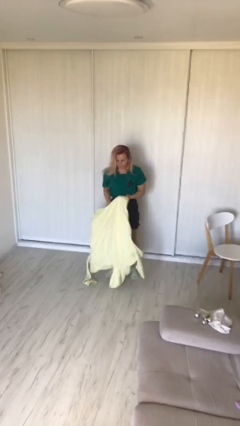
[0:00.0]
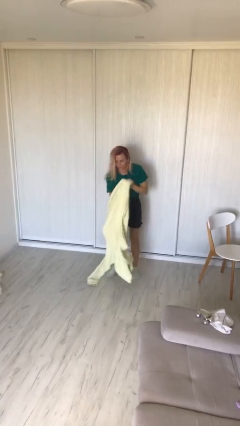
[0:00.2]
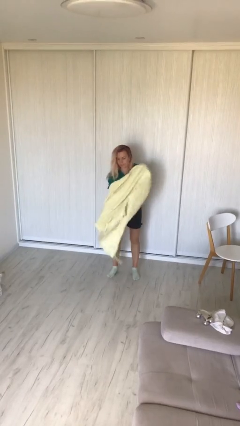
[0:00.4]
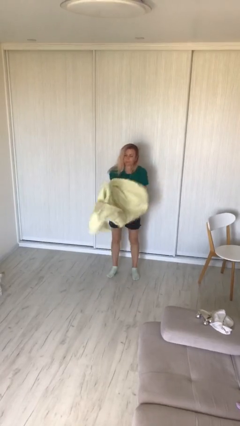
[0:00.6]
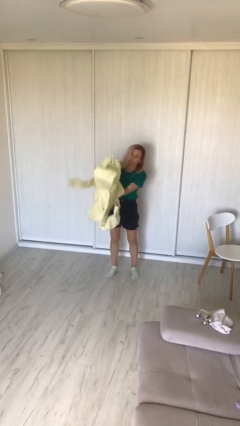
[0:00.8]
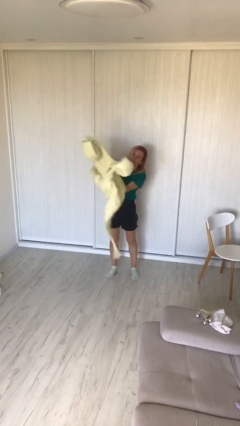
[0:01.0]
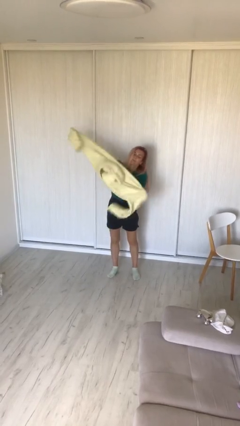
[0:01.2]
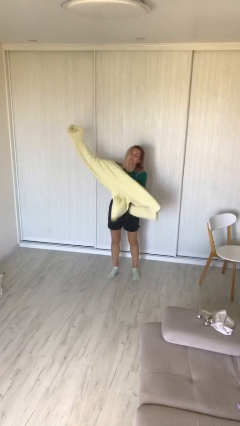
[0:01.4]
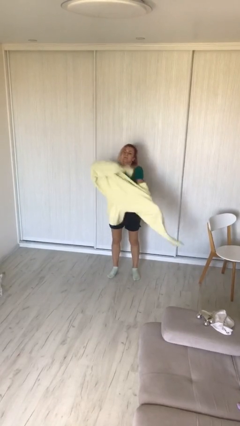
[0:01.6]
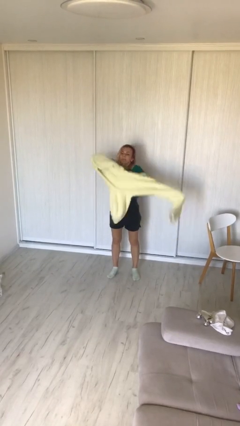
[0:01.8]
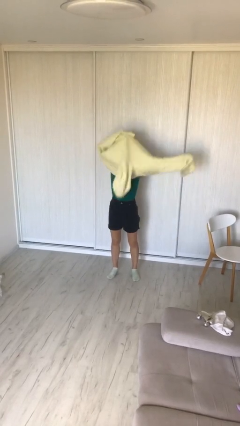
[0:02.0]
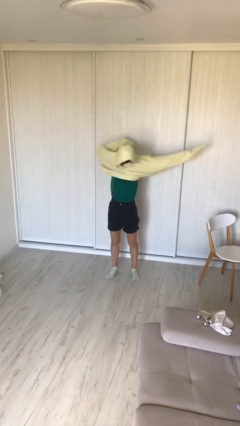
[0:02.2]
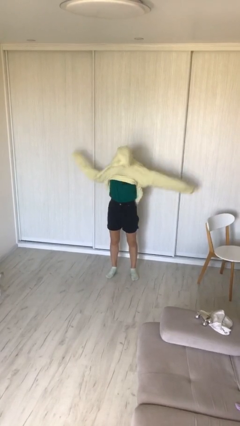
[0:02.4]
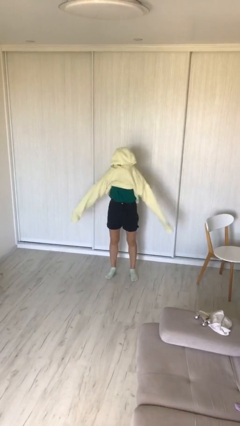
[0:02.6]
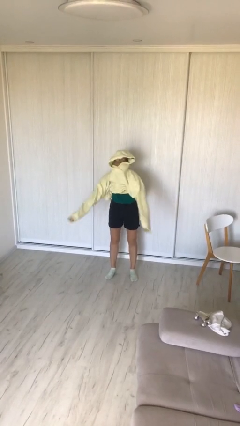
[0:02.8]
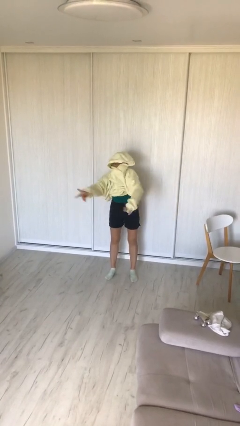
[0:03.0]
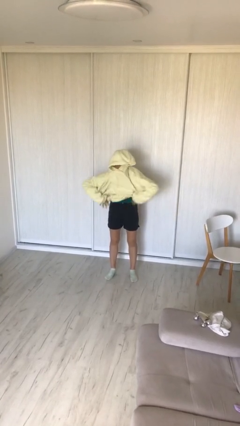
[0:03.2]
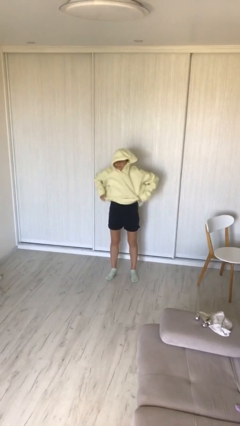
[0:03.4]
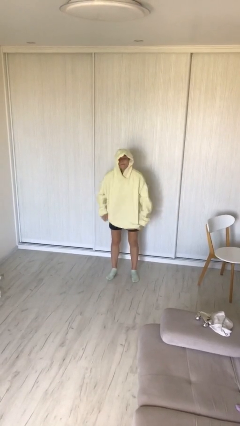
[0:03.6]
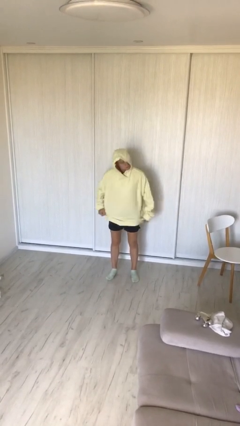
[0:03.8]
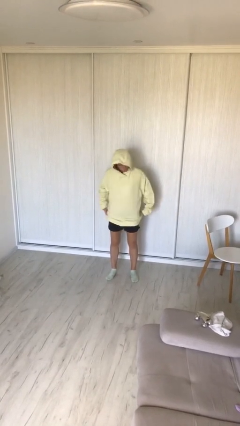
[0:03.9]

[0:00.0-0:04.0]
person puts on hoodie

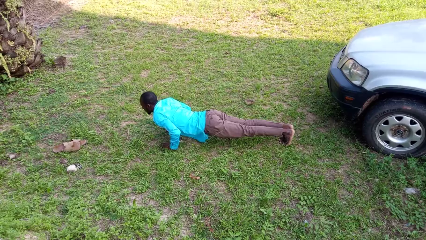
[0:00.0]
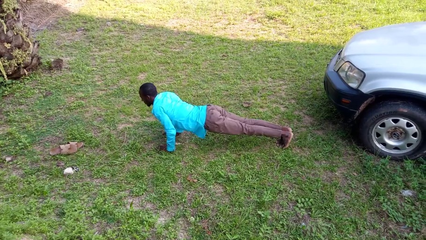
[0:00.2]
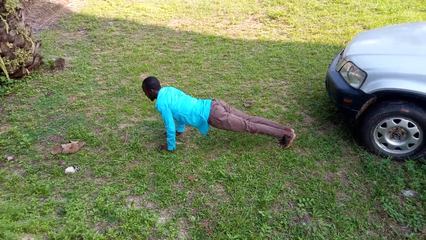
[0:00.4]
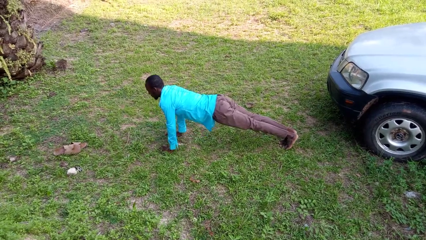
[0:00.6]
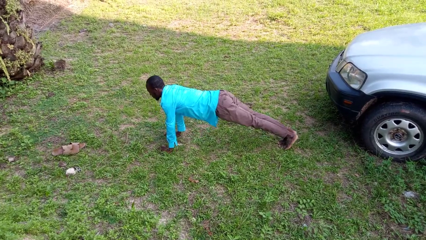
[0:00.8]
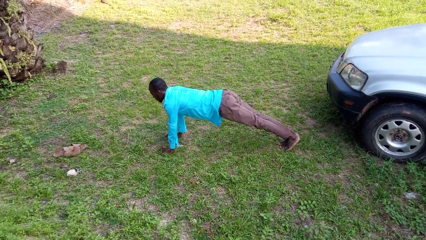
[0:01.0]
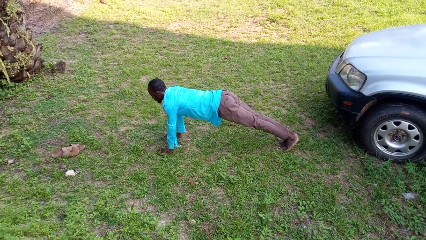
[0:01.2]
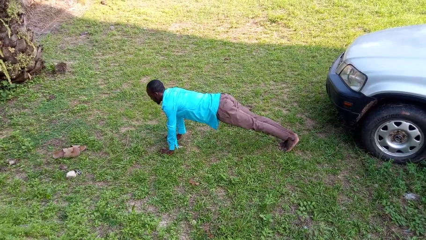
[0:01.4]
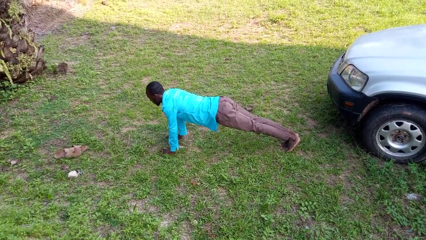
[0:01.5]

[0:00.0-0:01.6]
person exercises with pushup

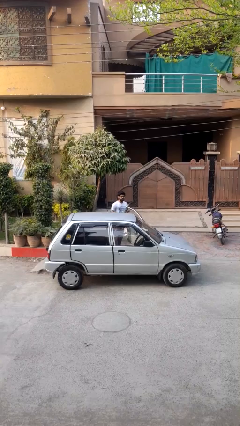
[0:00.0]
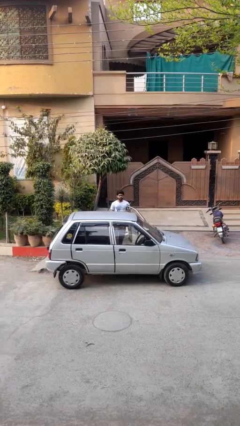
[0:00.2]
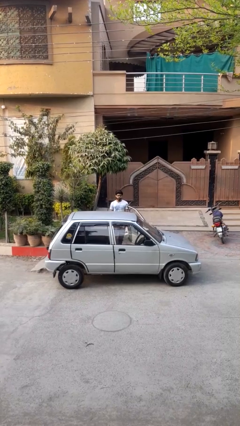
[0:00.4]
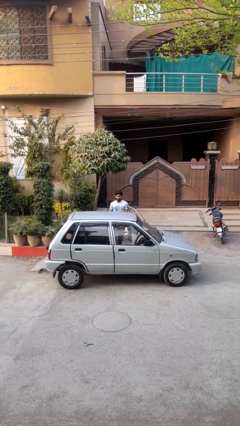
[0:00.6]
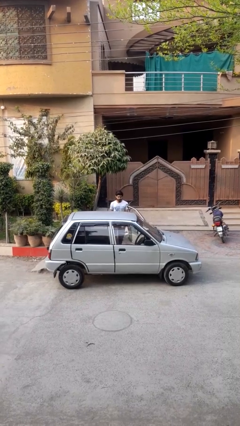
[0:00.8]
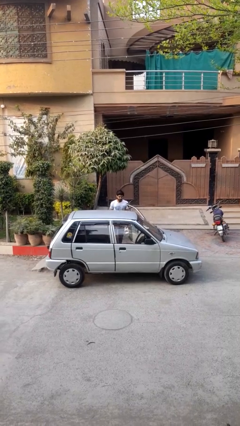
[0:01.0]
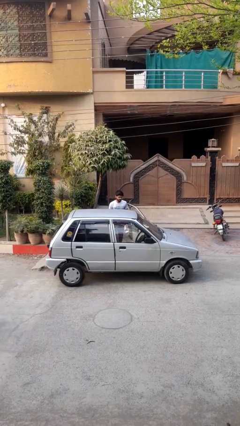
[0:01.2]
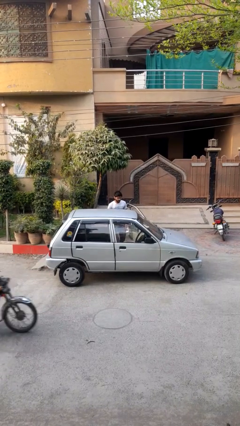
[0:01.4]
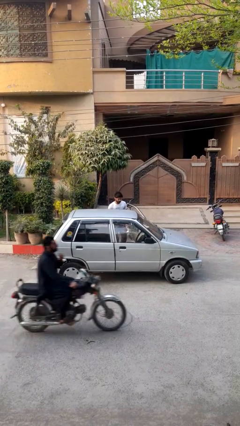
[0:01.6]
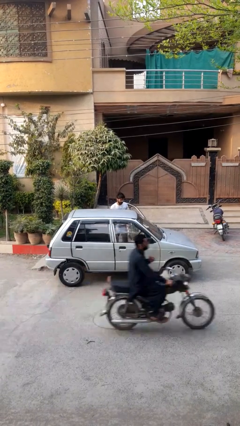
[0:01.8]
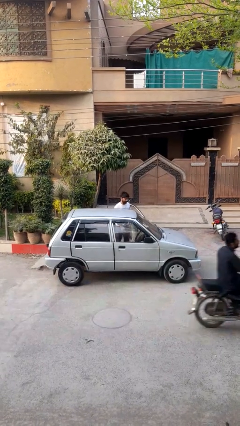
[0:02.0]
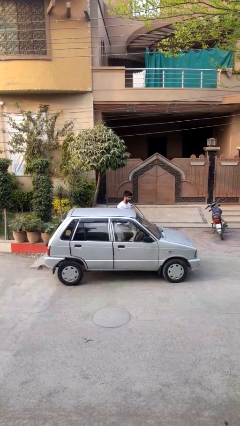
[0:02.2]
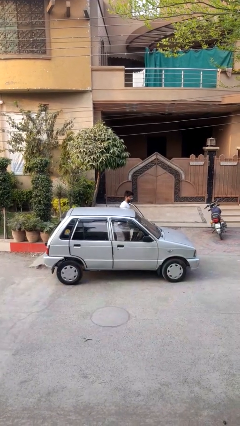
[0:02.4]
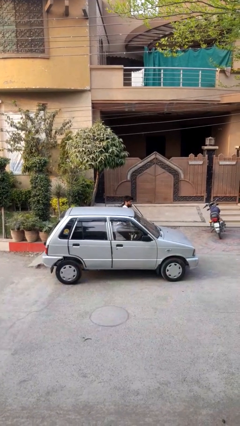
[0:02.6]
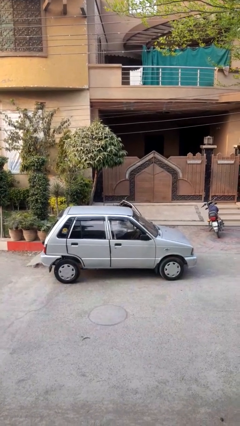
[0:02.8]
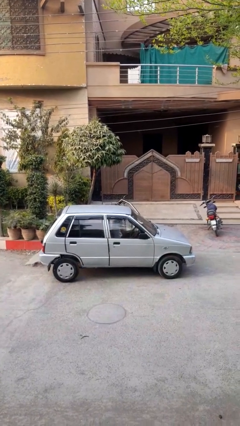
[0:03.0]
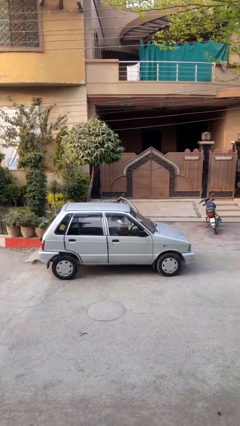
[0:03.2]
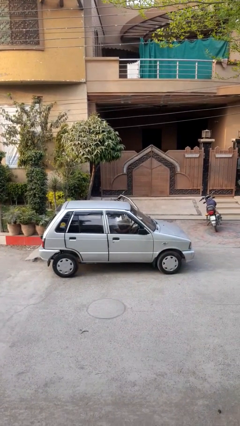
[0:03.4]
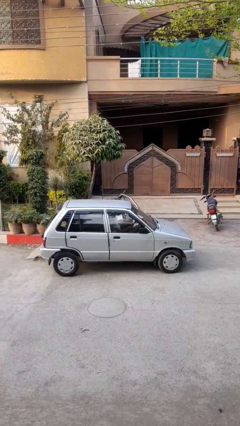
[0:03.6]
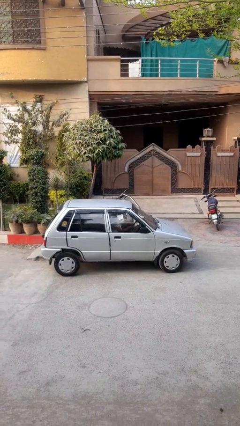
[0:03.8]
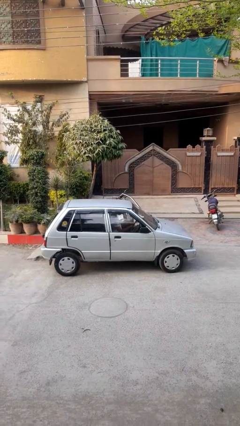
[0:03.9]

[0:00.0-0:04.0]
person enters car

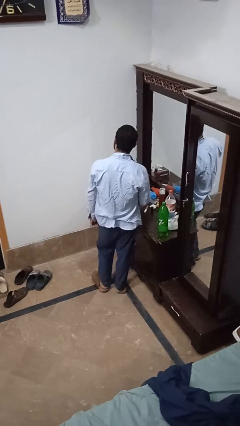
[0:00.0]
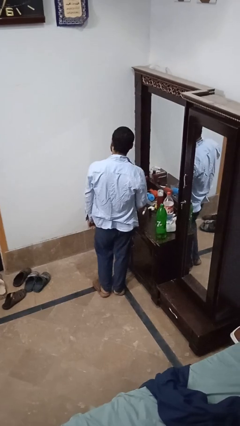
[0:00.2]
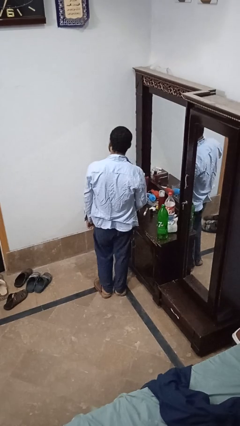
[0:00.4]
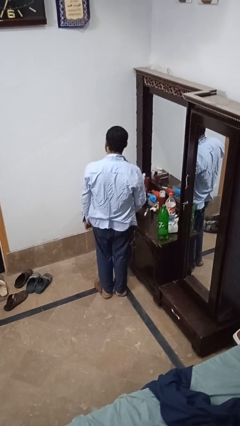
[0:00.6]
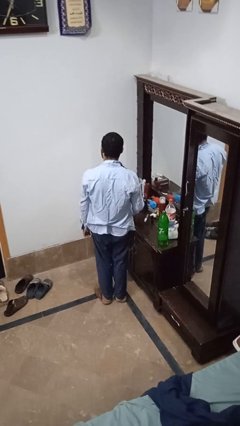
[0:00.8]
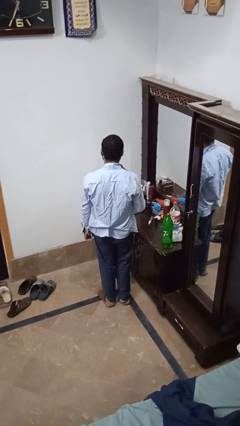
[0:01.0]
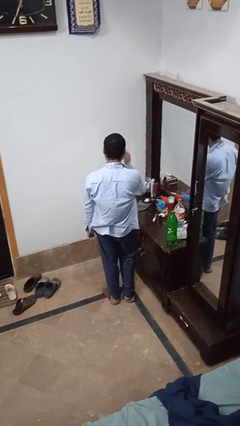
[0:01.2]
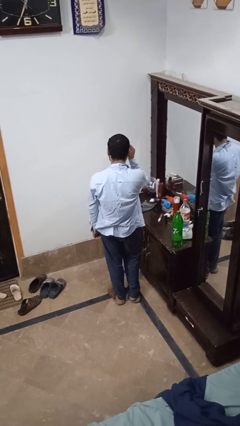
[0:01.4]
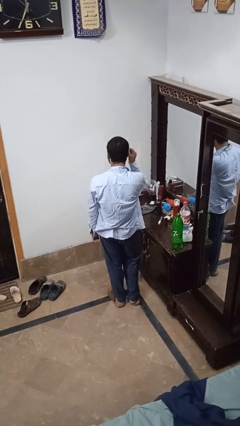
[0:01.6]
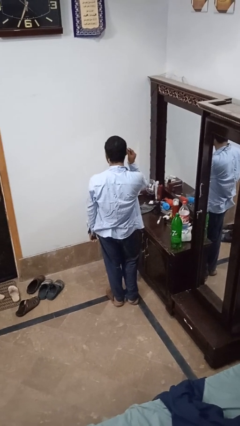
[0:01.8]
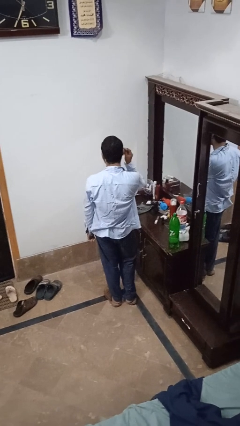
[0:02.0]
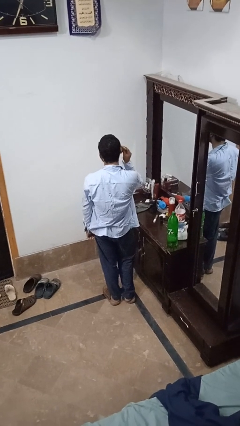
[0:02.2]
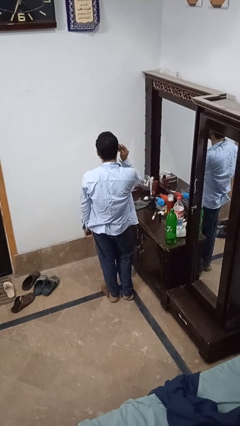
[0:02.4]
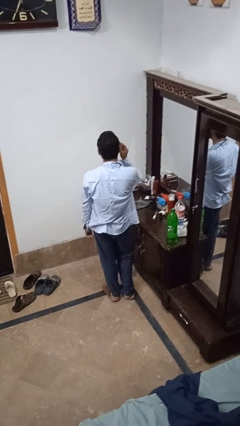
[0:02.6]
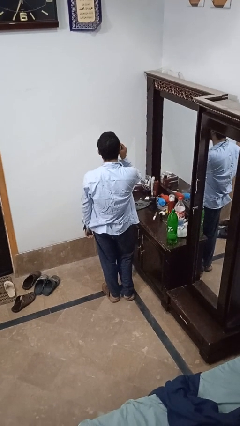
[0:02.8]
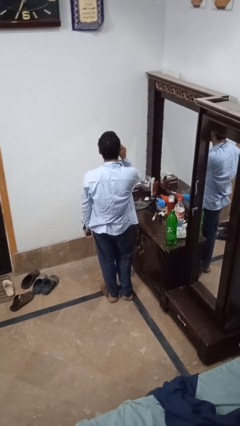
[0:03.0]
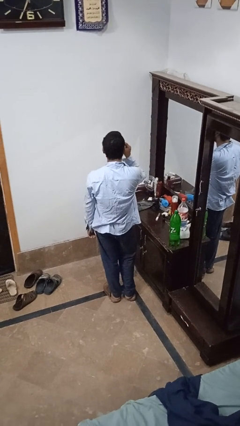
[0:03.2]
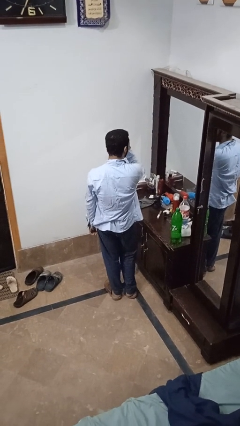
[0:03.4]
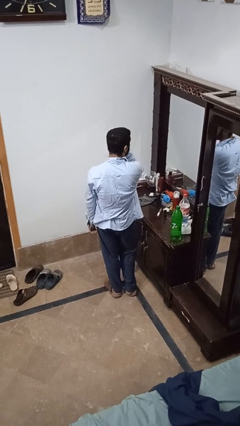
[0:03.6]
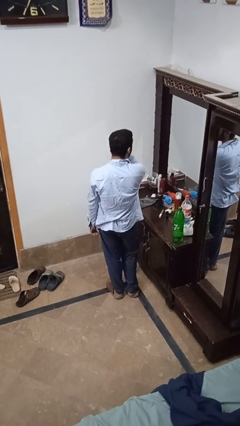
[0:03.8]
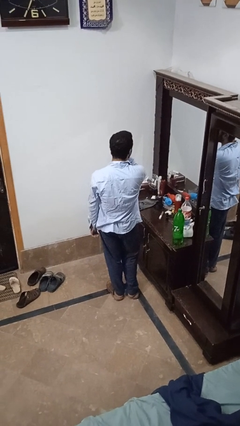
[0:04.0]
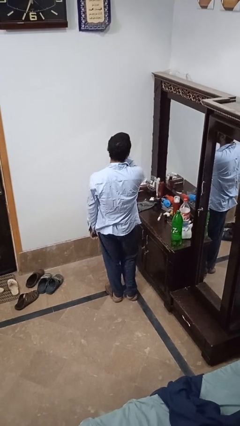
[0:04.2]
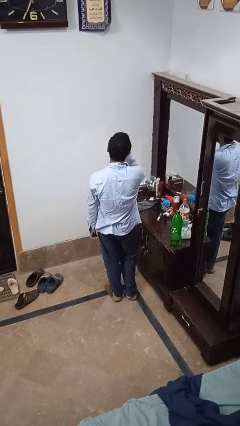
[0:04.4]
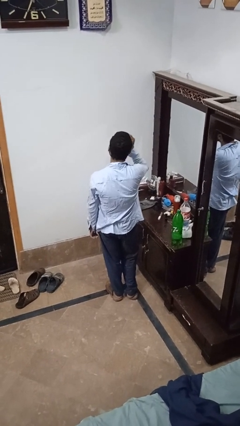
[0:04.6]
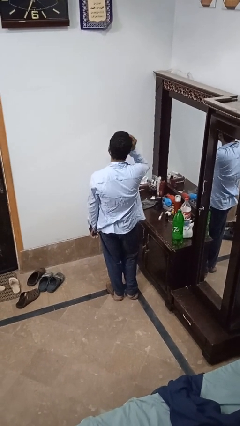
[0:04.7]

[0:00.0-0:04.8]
person applies foundation makeup

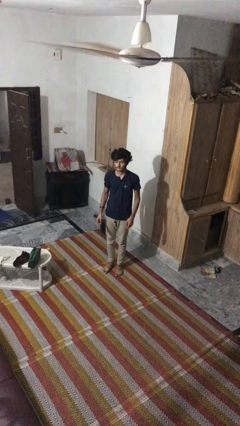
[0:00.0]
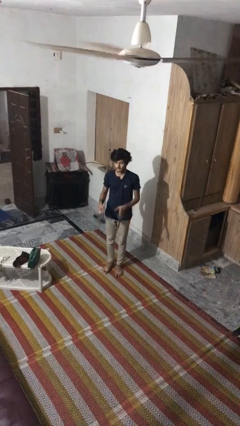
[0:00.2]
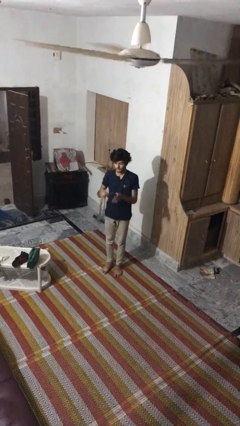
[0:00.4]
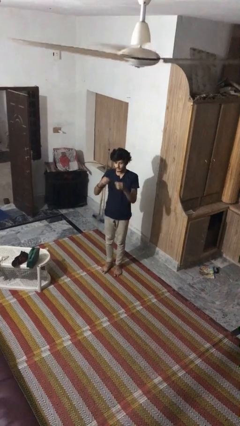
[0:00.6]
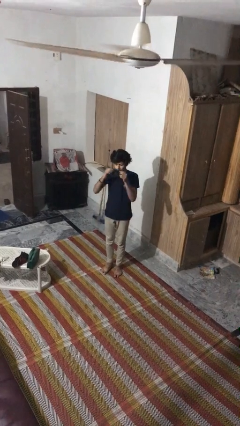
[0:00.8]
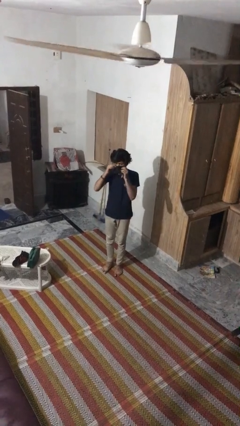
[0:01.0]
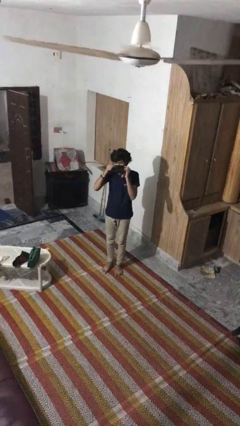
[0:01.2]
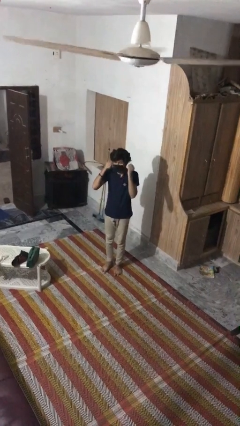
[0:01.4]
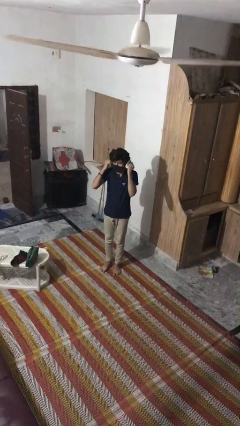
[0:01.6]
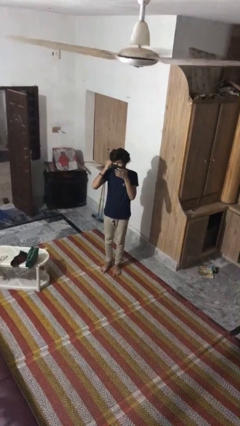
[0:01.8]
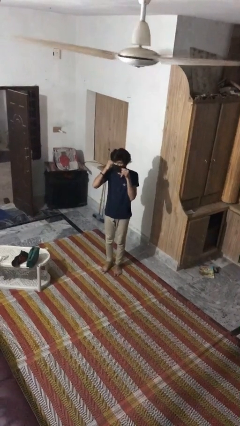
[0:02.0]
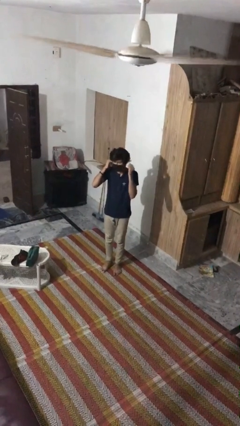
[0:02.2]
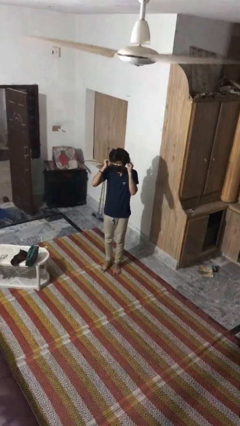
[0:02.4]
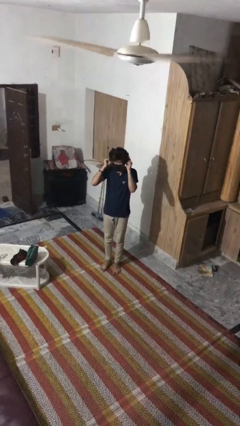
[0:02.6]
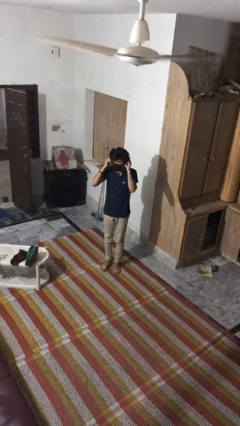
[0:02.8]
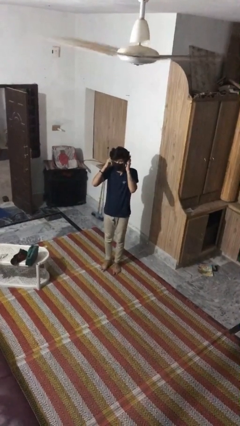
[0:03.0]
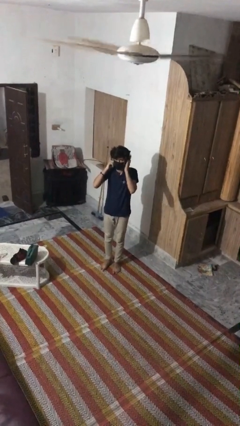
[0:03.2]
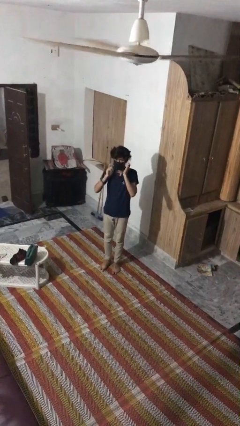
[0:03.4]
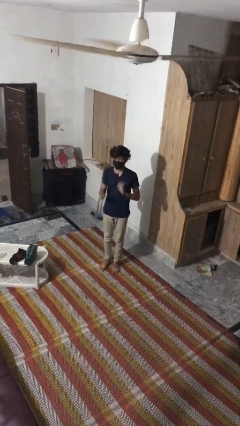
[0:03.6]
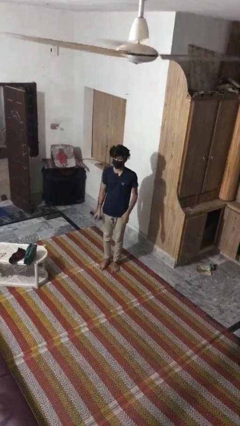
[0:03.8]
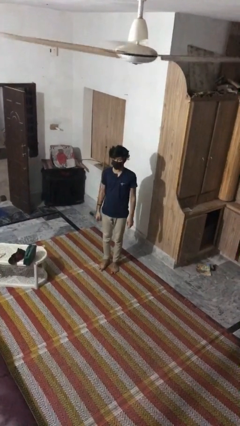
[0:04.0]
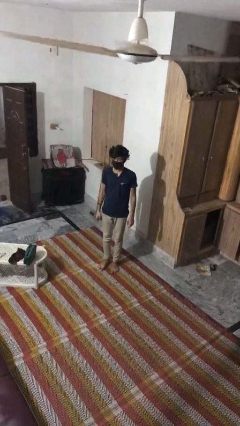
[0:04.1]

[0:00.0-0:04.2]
person puts on facemask
